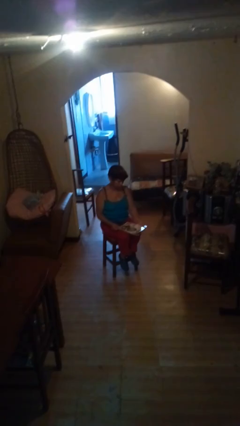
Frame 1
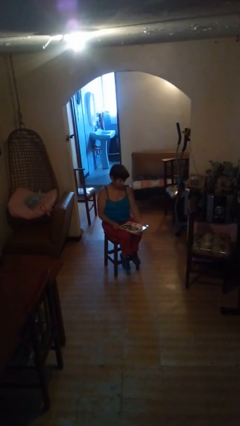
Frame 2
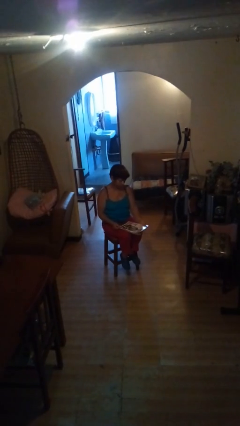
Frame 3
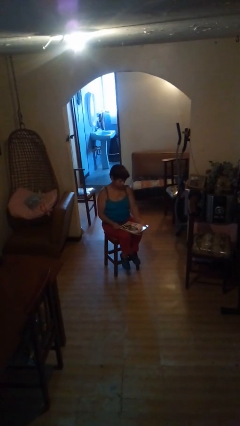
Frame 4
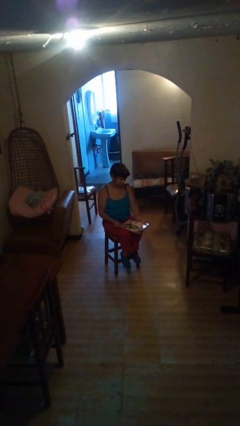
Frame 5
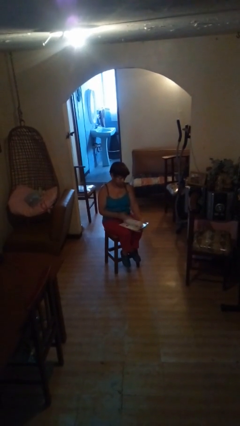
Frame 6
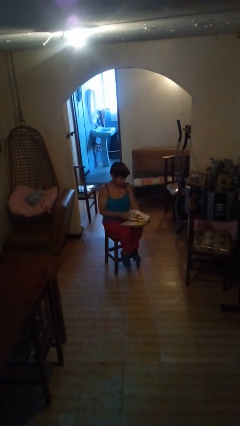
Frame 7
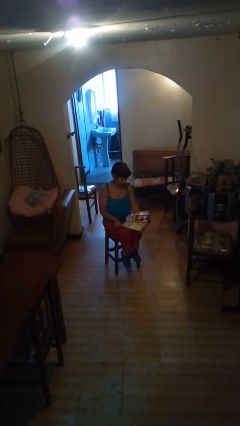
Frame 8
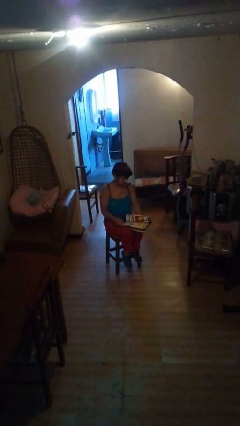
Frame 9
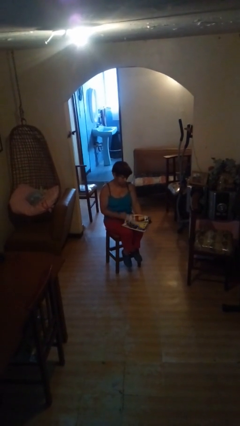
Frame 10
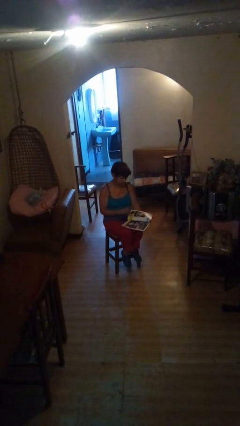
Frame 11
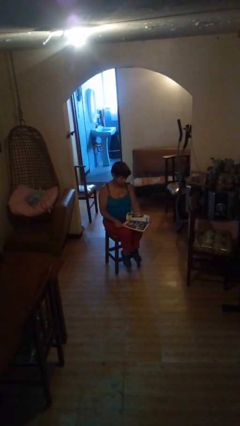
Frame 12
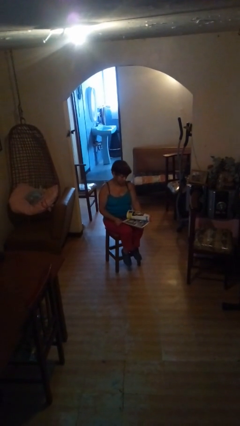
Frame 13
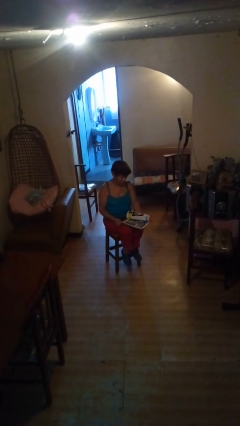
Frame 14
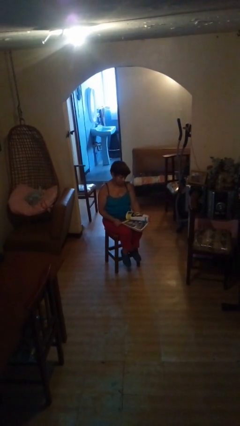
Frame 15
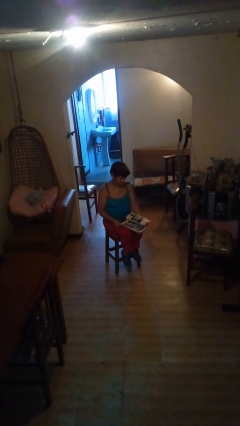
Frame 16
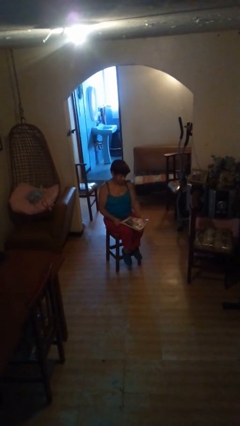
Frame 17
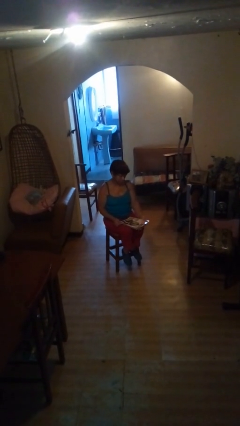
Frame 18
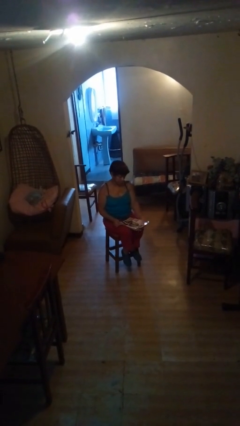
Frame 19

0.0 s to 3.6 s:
person reads magazine

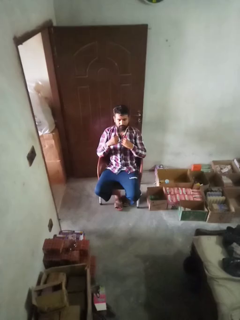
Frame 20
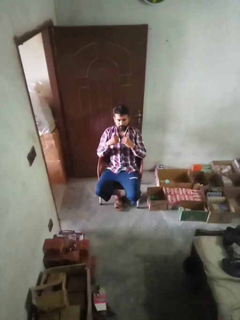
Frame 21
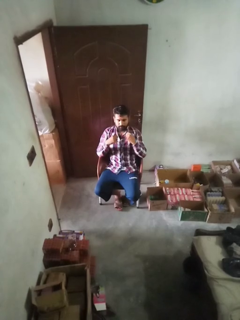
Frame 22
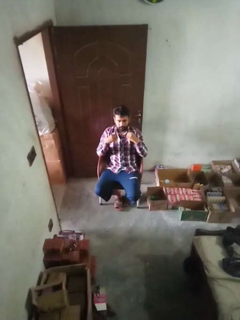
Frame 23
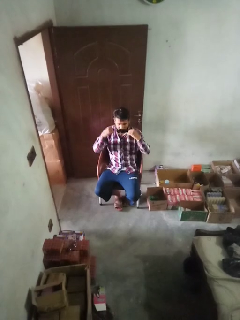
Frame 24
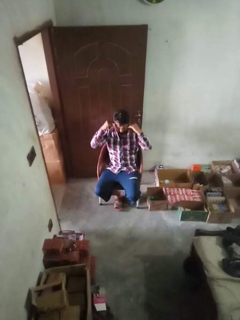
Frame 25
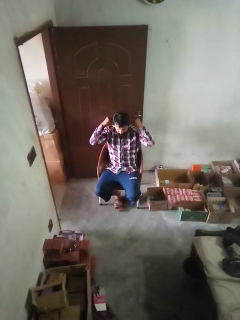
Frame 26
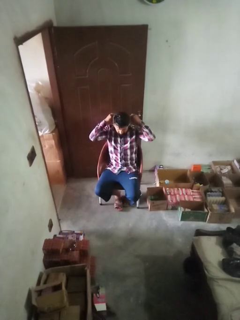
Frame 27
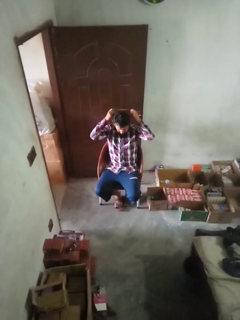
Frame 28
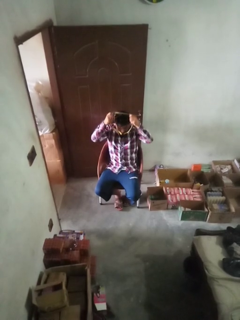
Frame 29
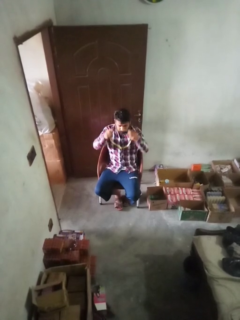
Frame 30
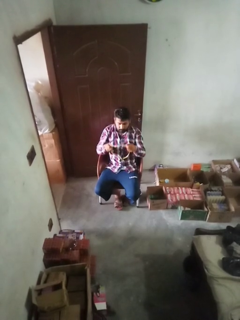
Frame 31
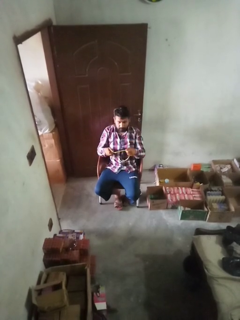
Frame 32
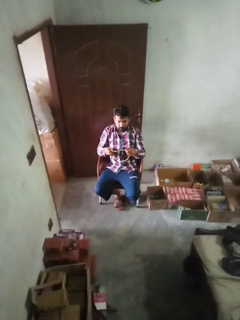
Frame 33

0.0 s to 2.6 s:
person takes off necklace

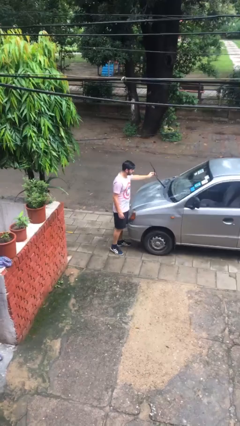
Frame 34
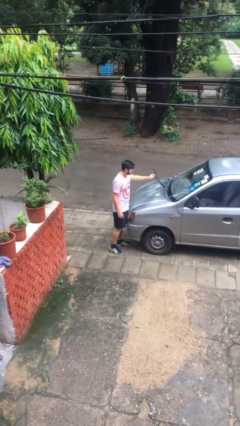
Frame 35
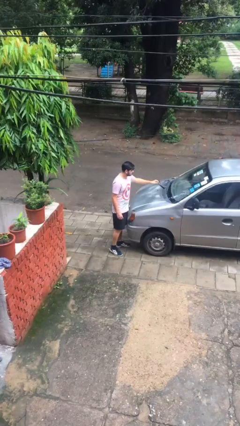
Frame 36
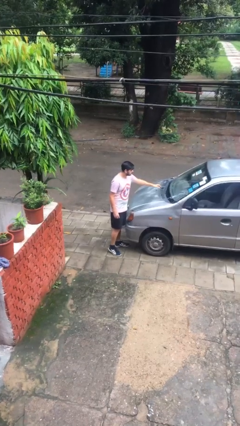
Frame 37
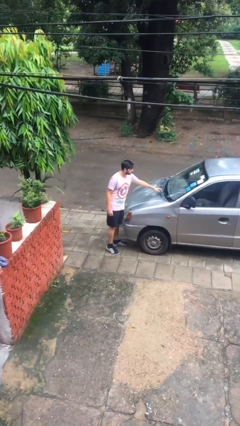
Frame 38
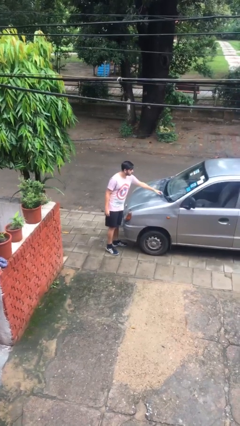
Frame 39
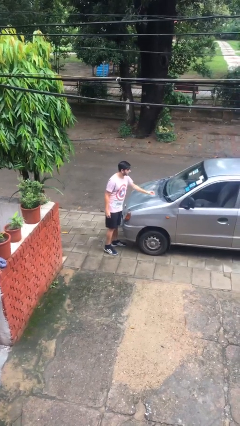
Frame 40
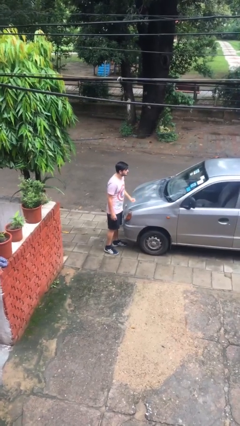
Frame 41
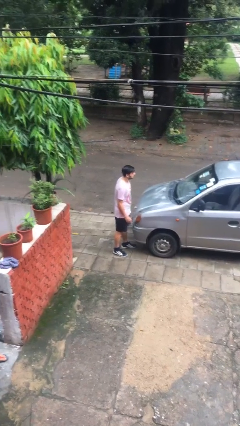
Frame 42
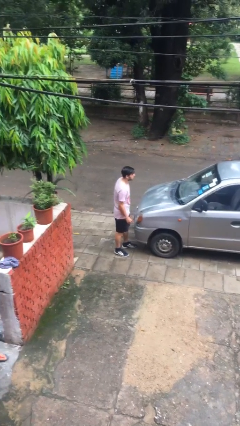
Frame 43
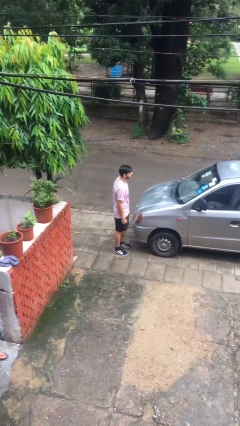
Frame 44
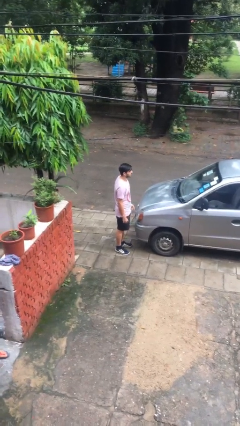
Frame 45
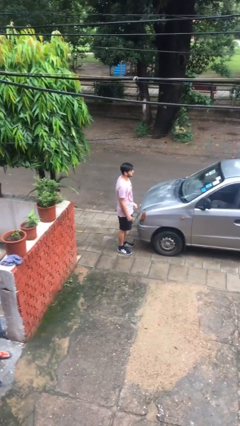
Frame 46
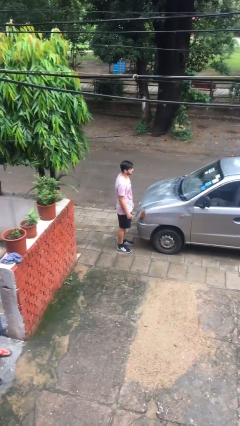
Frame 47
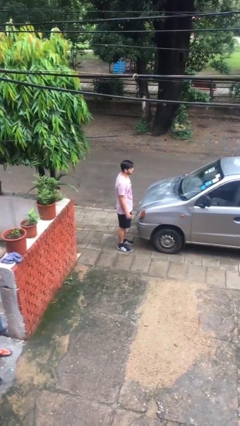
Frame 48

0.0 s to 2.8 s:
person flips down car wipers

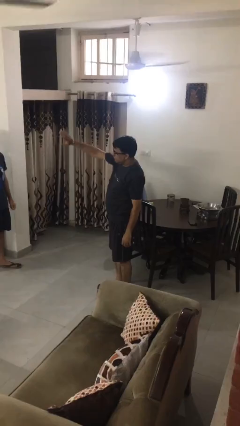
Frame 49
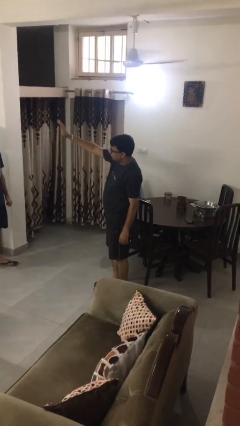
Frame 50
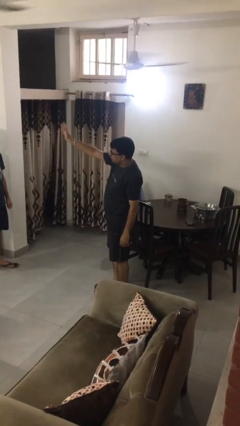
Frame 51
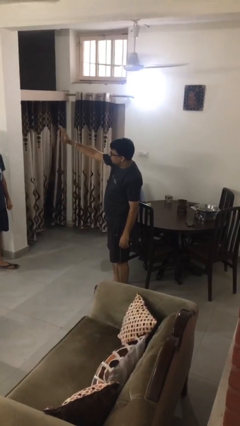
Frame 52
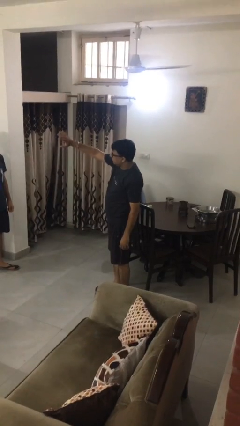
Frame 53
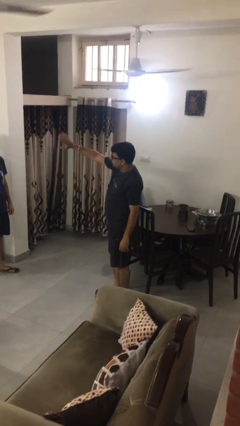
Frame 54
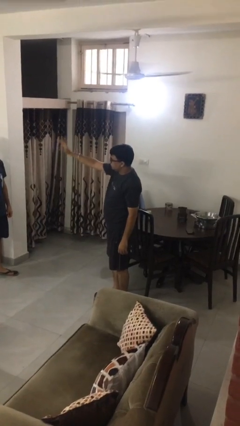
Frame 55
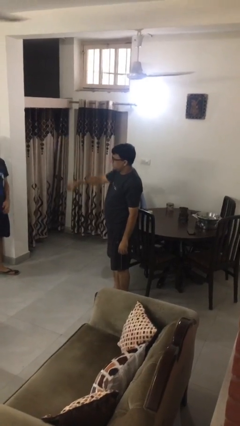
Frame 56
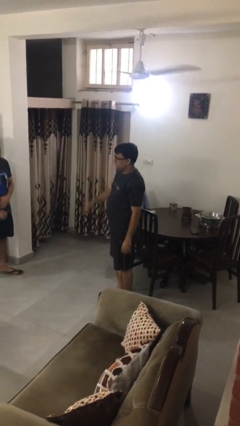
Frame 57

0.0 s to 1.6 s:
person waves at person

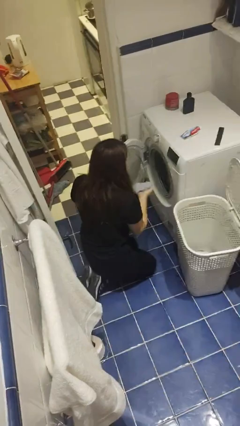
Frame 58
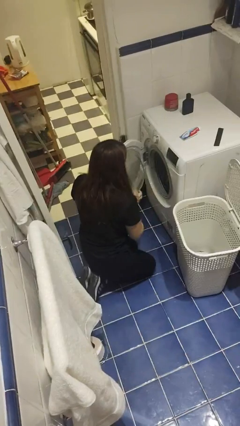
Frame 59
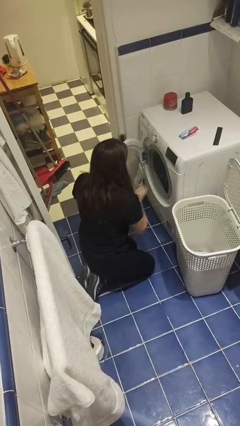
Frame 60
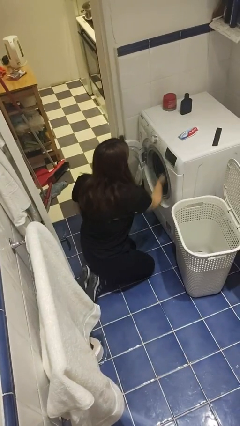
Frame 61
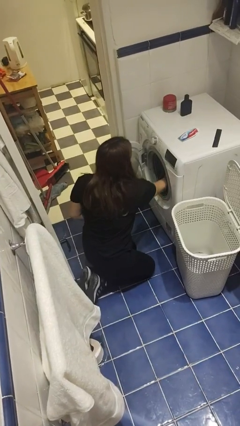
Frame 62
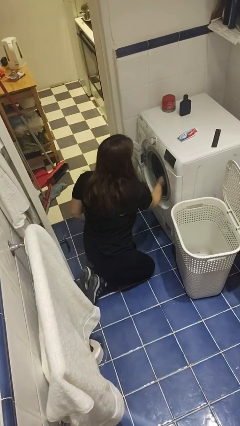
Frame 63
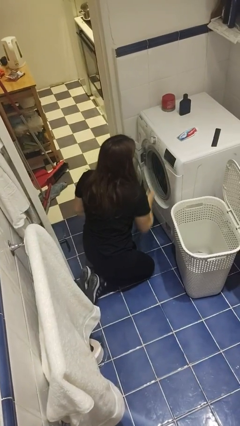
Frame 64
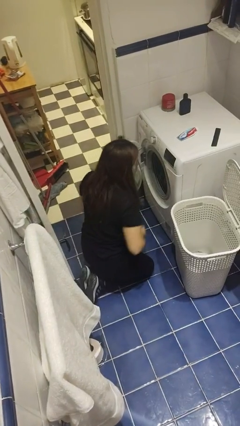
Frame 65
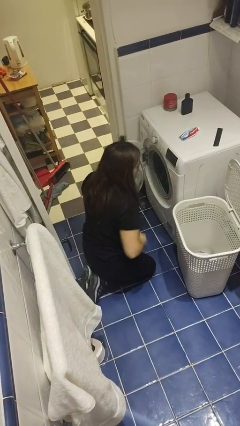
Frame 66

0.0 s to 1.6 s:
person loads clotheswasher

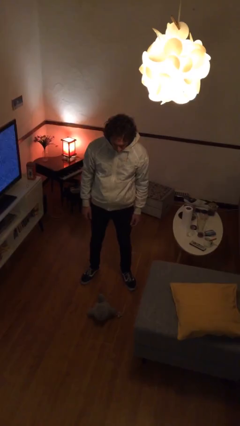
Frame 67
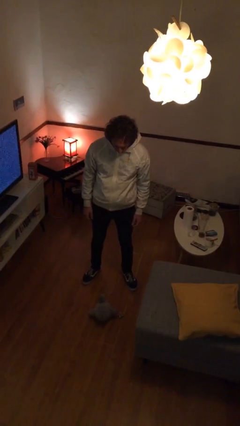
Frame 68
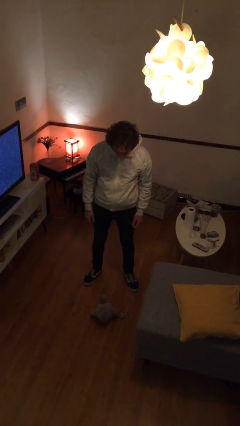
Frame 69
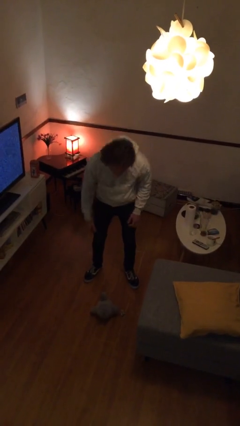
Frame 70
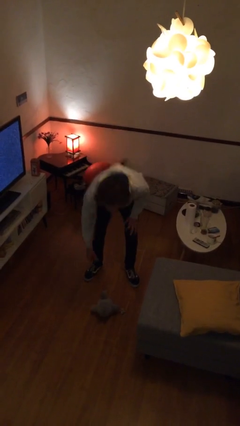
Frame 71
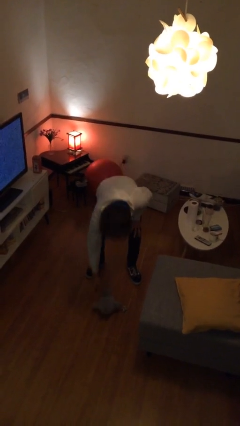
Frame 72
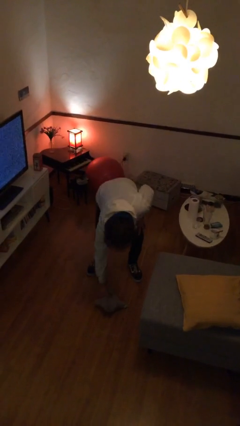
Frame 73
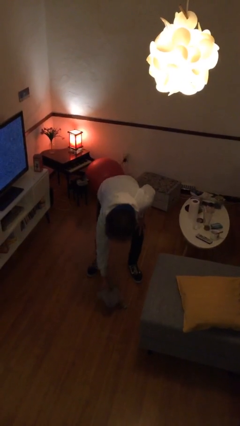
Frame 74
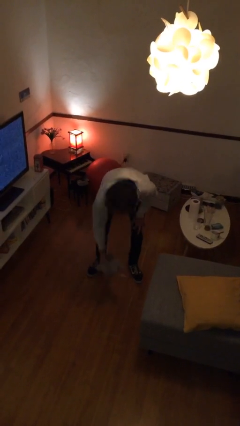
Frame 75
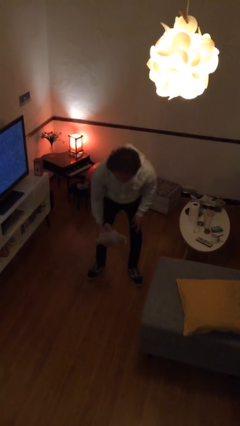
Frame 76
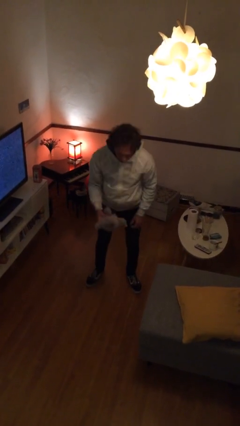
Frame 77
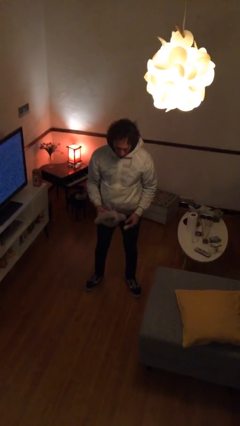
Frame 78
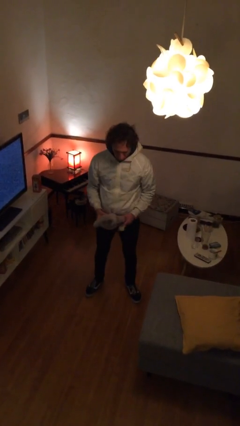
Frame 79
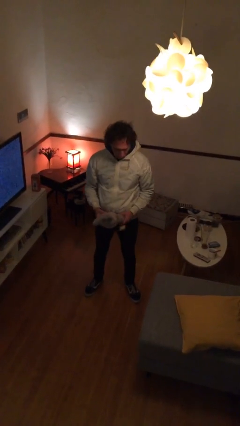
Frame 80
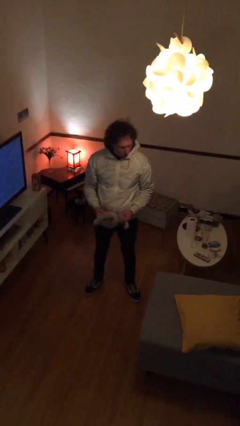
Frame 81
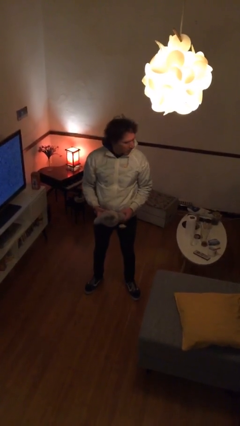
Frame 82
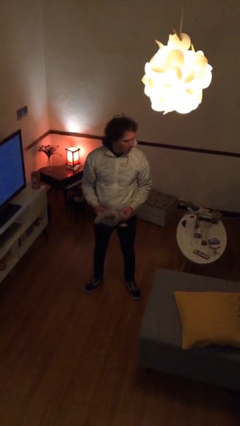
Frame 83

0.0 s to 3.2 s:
person picks up object from floor

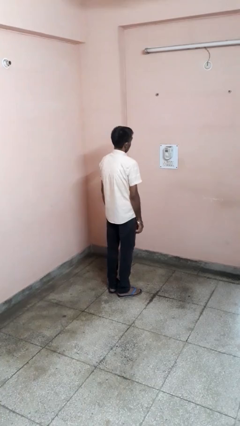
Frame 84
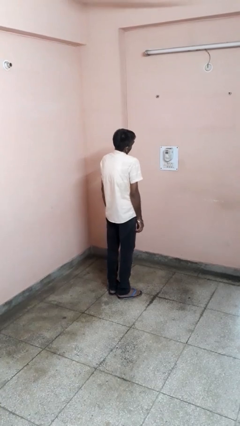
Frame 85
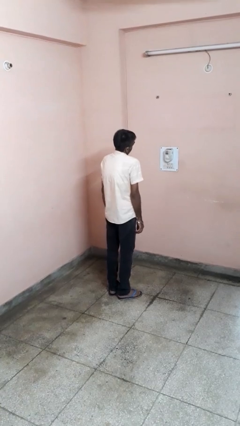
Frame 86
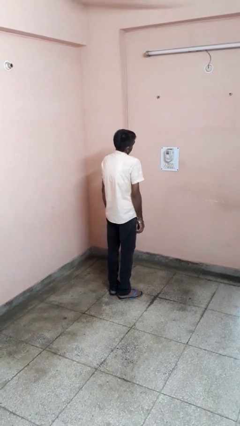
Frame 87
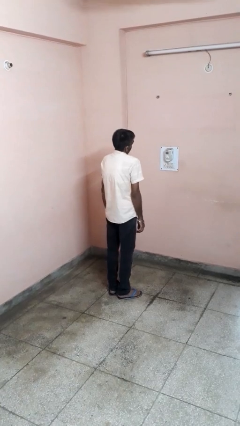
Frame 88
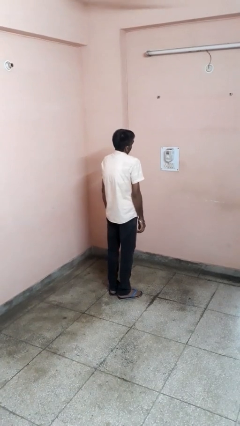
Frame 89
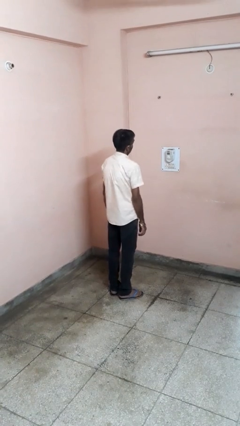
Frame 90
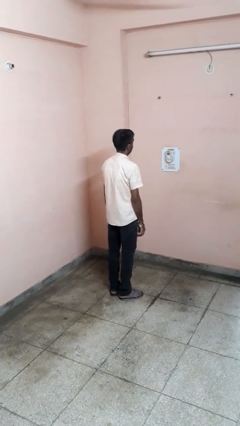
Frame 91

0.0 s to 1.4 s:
person shrugs

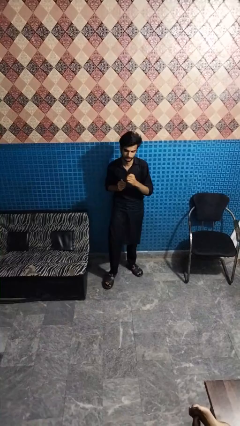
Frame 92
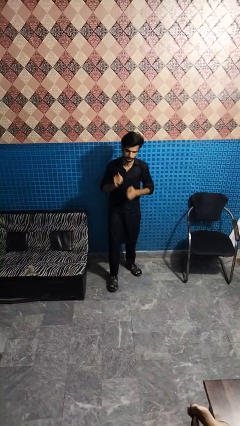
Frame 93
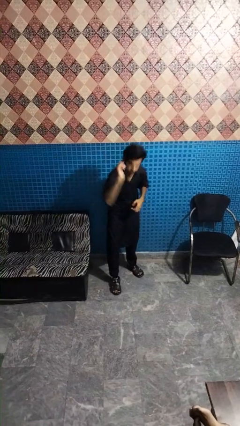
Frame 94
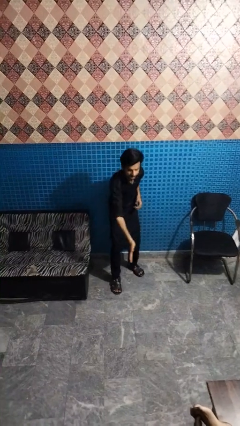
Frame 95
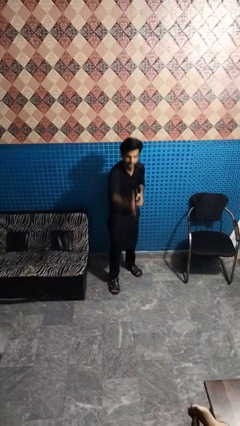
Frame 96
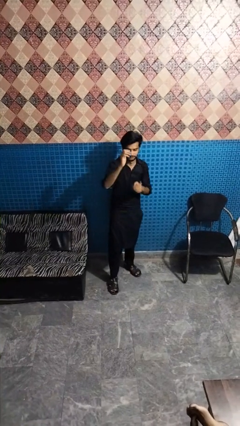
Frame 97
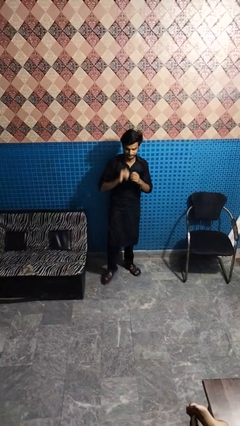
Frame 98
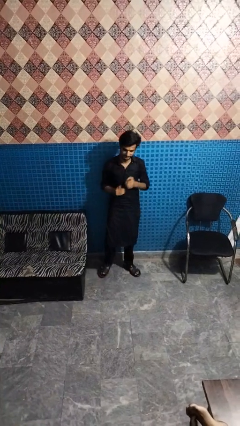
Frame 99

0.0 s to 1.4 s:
person karate chop
